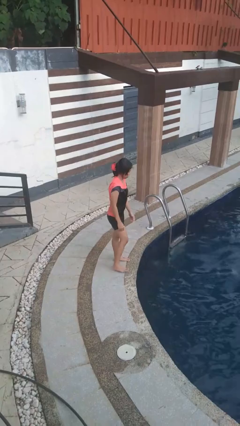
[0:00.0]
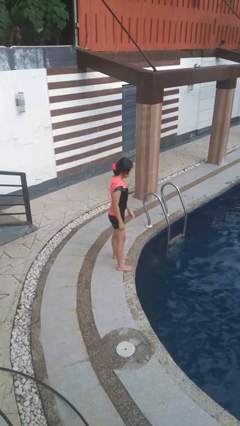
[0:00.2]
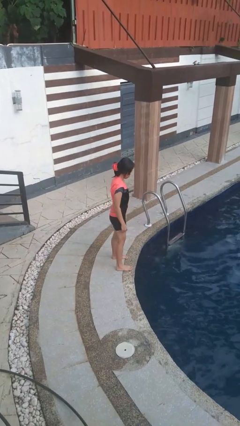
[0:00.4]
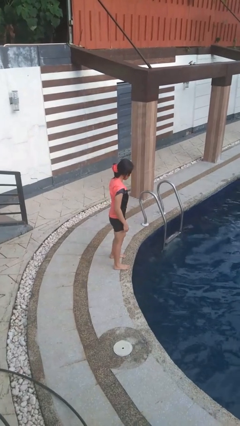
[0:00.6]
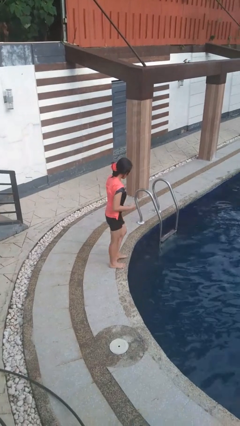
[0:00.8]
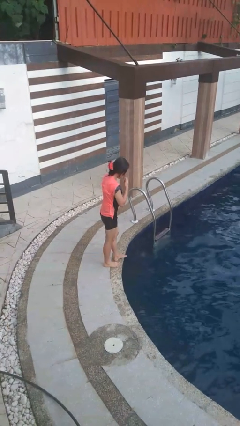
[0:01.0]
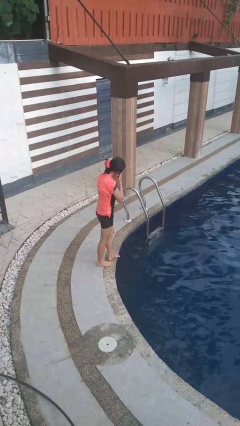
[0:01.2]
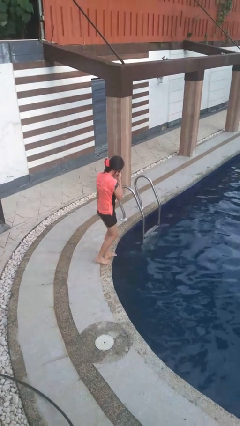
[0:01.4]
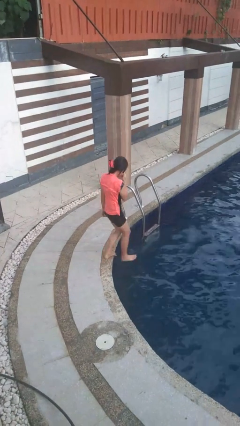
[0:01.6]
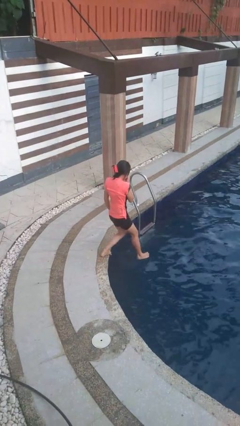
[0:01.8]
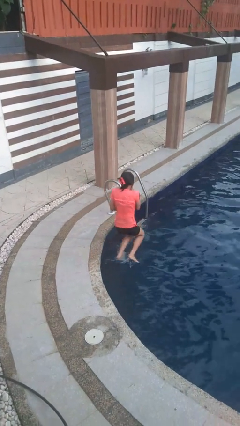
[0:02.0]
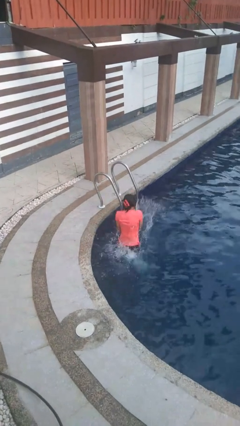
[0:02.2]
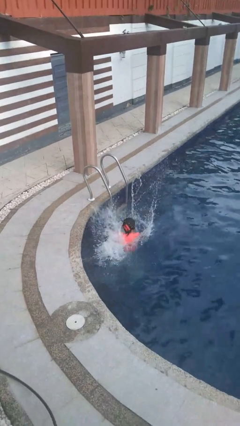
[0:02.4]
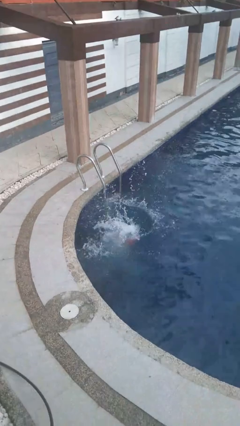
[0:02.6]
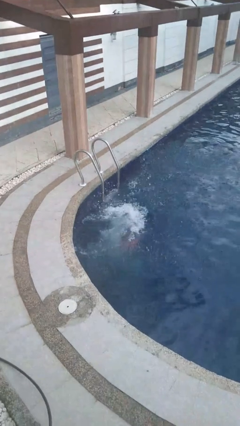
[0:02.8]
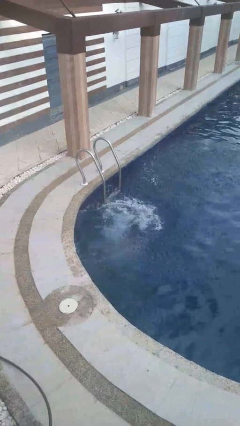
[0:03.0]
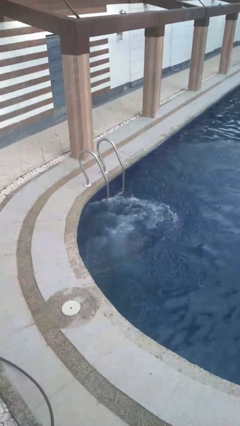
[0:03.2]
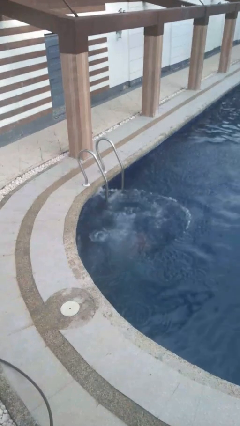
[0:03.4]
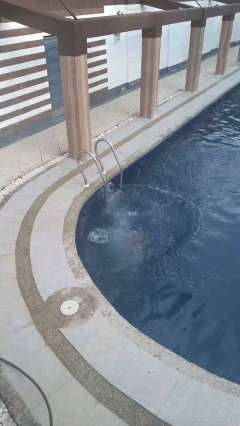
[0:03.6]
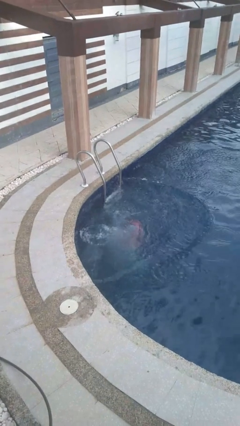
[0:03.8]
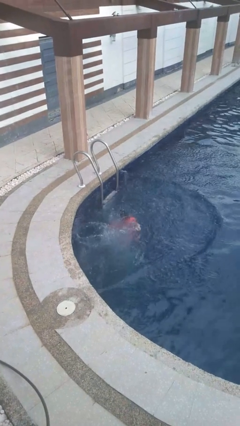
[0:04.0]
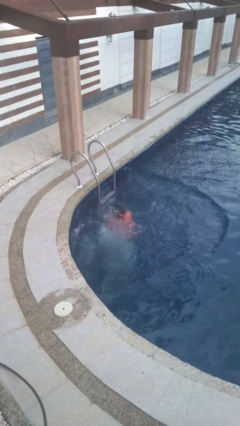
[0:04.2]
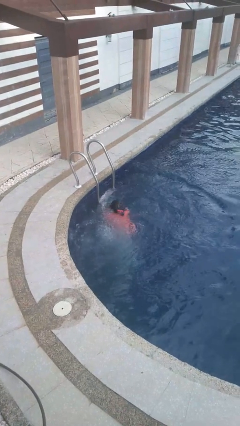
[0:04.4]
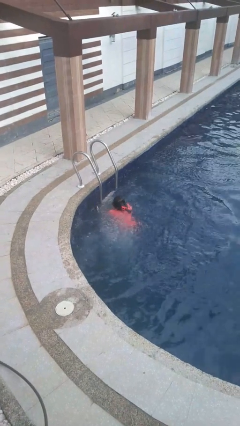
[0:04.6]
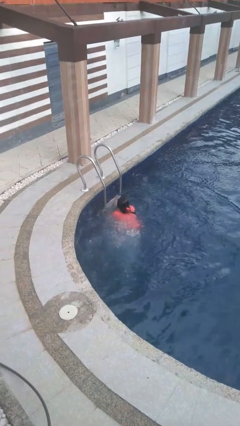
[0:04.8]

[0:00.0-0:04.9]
person jumps into pool

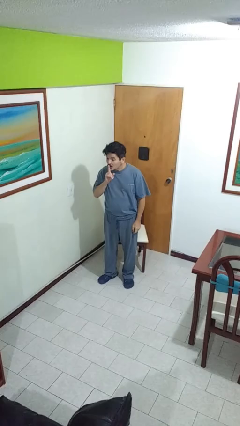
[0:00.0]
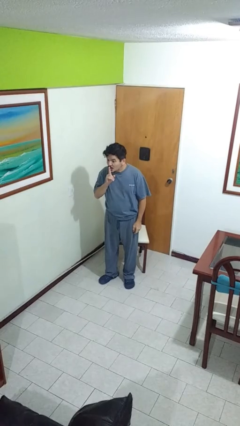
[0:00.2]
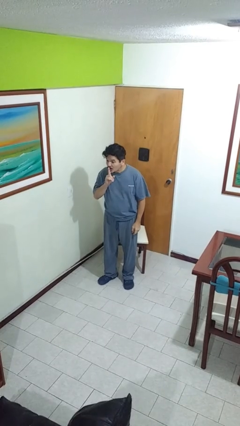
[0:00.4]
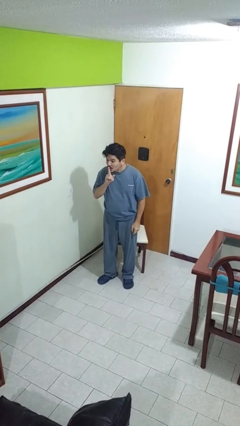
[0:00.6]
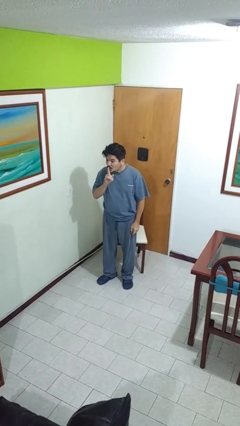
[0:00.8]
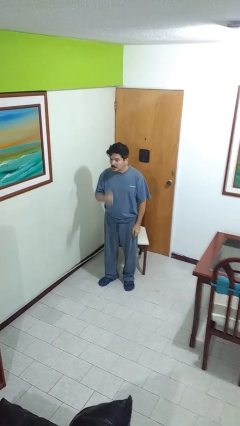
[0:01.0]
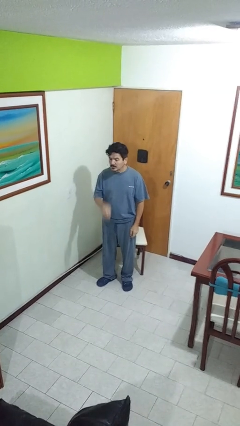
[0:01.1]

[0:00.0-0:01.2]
person gestures be quiet

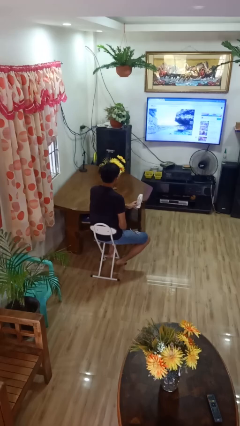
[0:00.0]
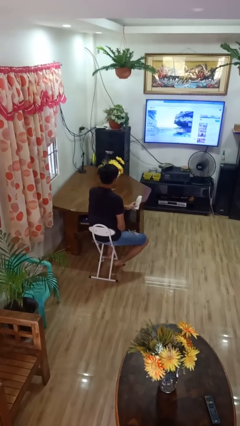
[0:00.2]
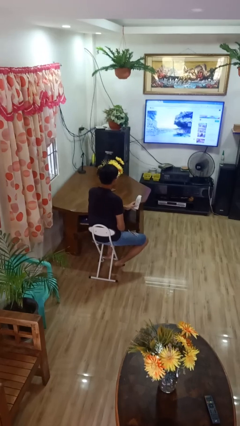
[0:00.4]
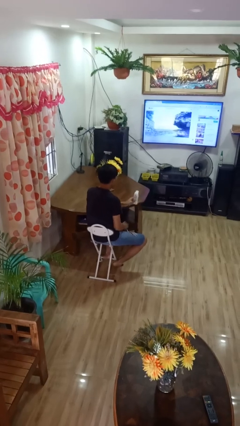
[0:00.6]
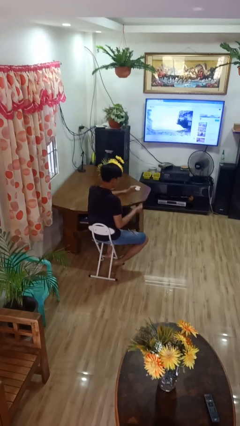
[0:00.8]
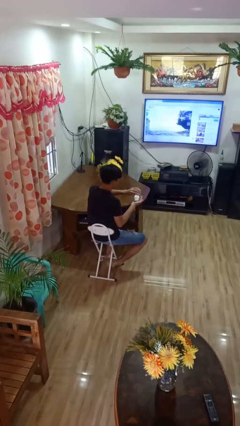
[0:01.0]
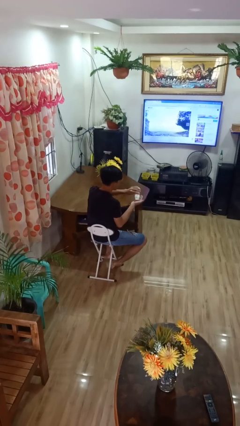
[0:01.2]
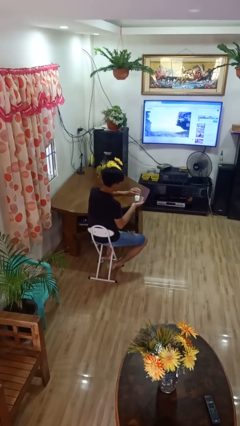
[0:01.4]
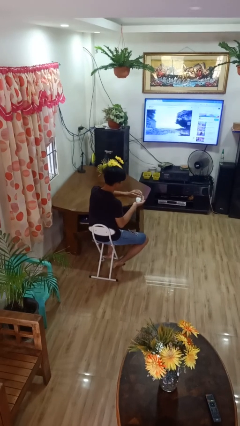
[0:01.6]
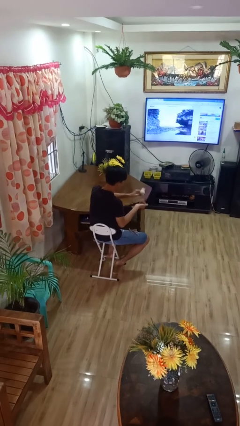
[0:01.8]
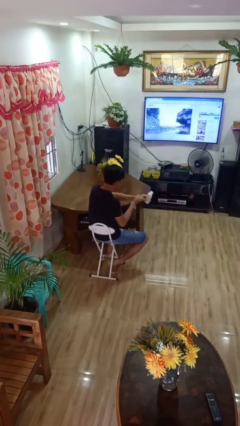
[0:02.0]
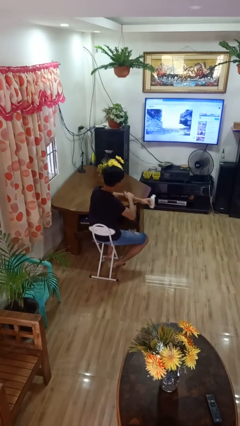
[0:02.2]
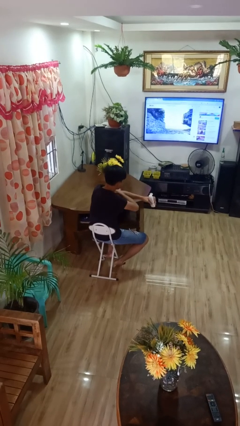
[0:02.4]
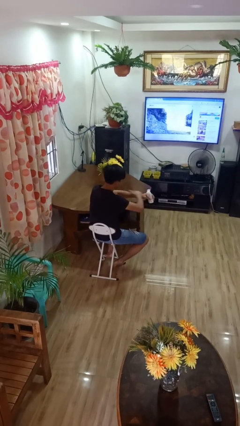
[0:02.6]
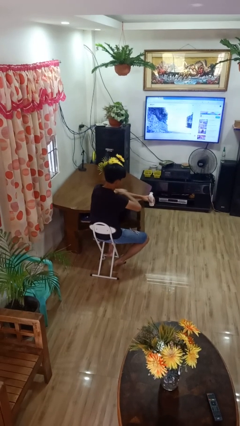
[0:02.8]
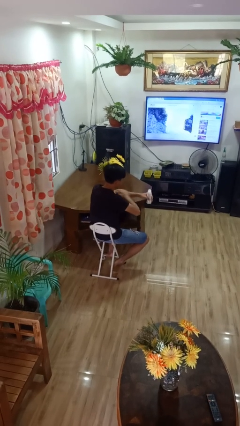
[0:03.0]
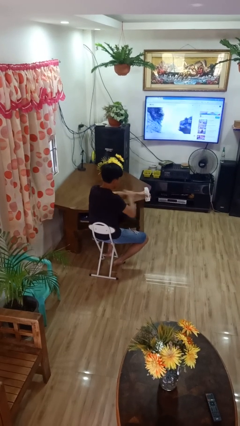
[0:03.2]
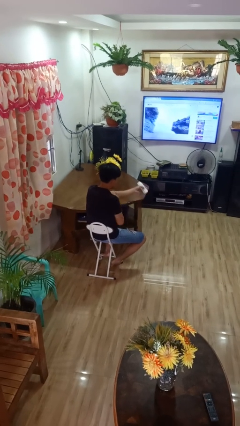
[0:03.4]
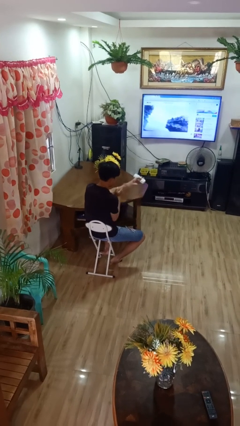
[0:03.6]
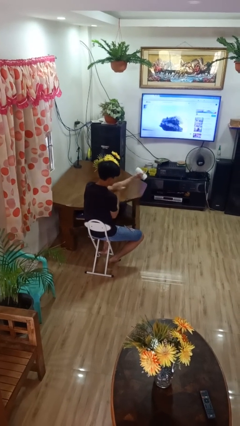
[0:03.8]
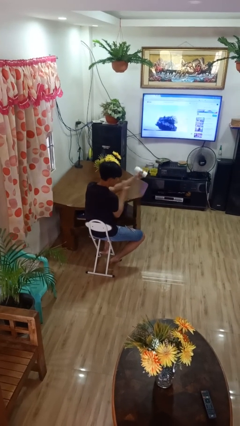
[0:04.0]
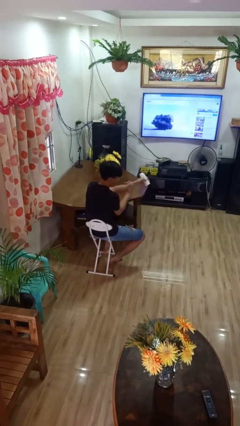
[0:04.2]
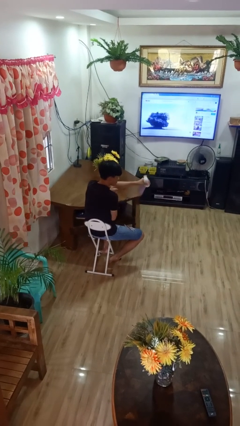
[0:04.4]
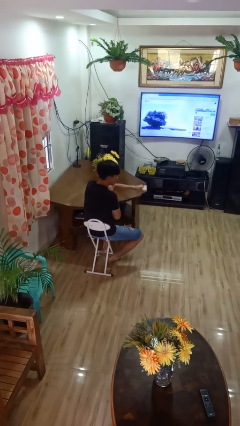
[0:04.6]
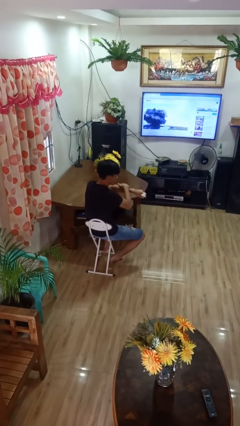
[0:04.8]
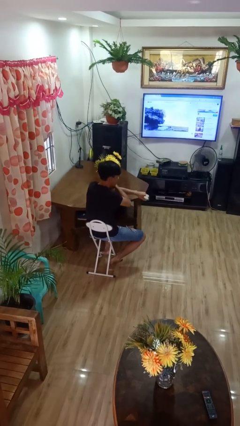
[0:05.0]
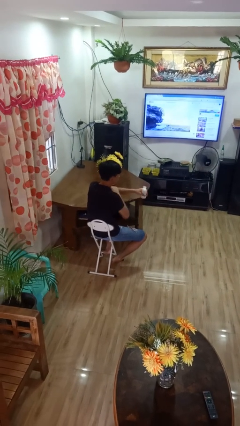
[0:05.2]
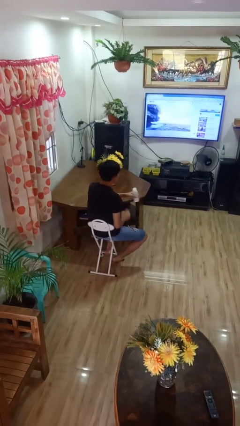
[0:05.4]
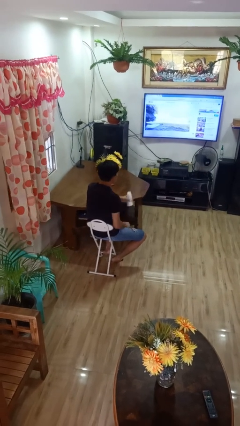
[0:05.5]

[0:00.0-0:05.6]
person applies sunscreen

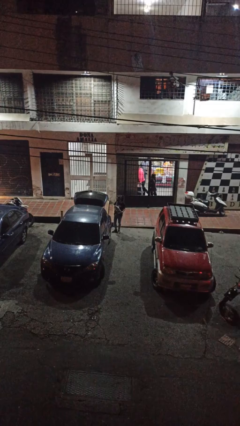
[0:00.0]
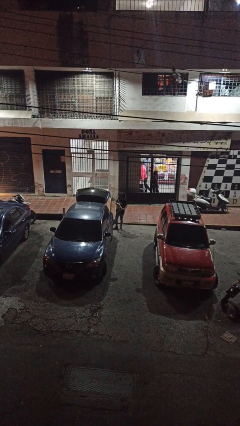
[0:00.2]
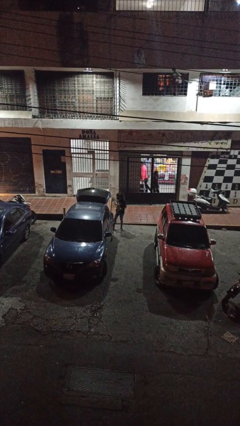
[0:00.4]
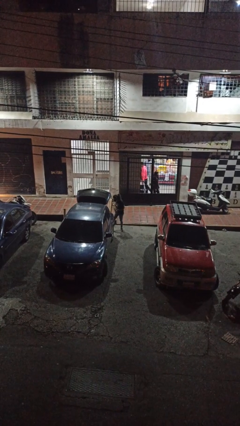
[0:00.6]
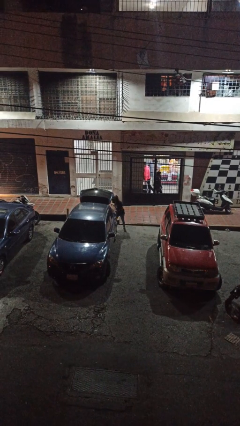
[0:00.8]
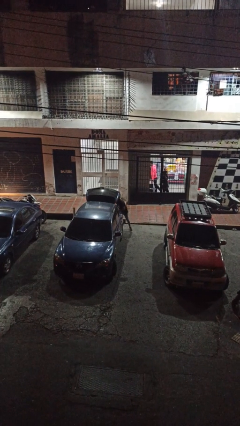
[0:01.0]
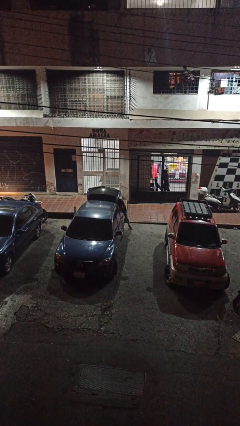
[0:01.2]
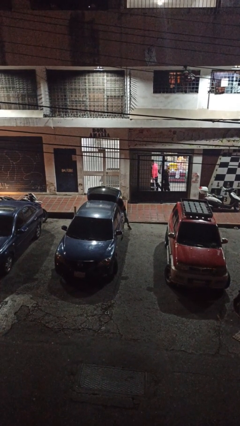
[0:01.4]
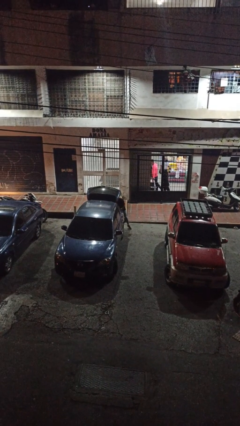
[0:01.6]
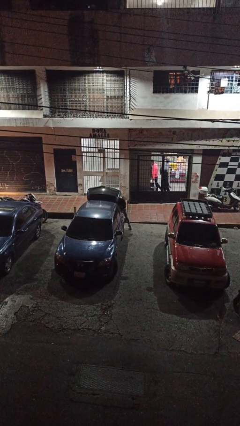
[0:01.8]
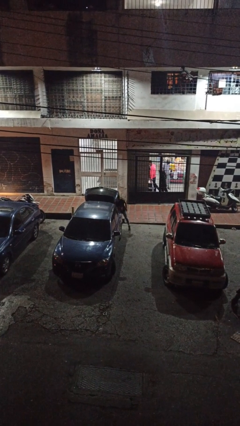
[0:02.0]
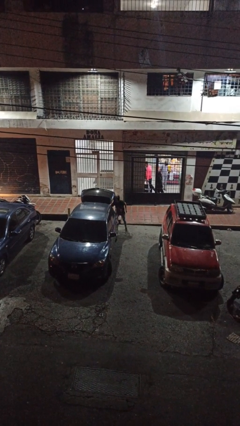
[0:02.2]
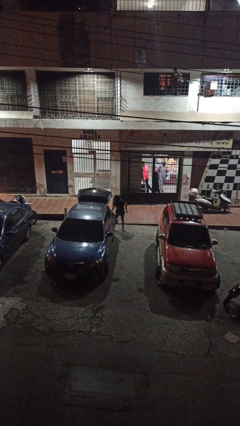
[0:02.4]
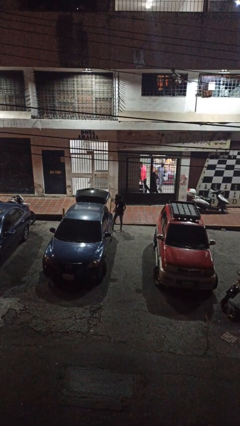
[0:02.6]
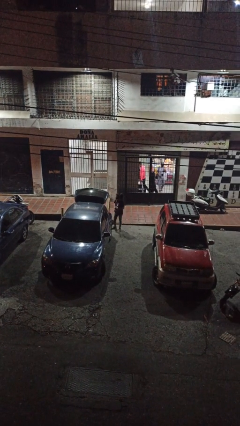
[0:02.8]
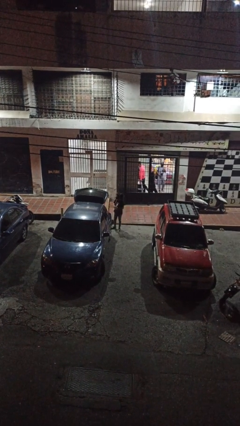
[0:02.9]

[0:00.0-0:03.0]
person loads car

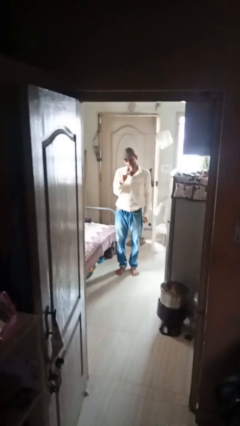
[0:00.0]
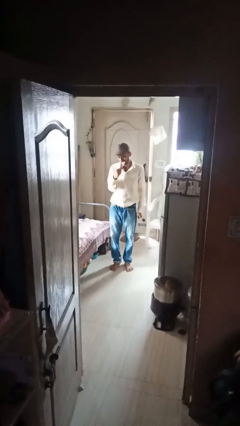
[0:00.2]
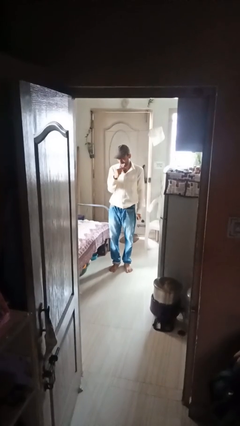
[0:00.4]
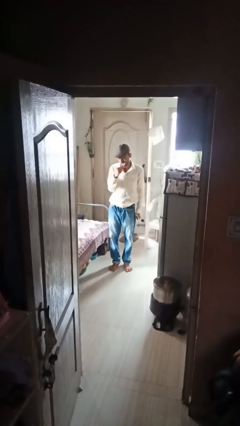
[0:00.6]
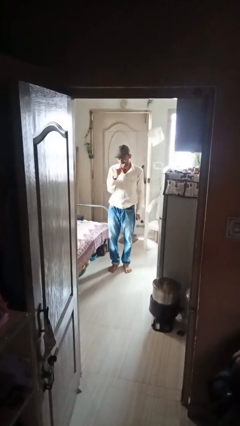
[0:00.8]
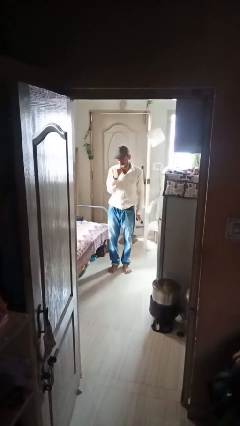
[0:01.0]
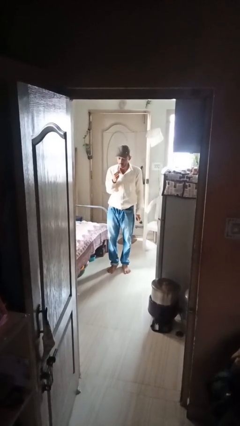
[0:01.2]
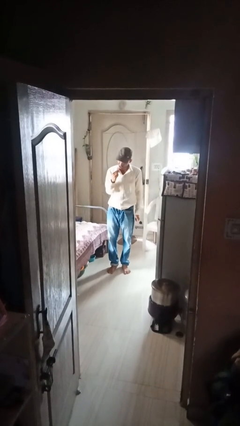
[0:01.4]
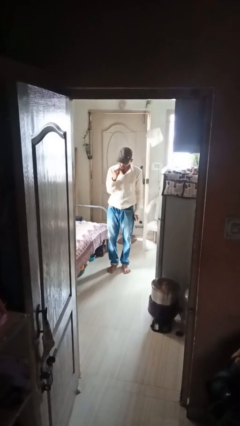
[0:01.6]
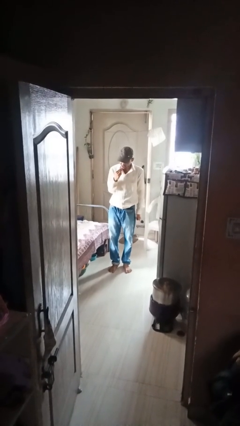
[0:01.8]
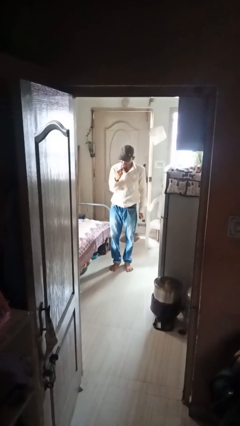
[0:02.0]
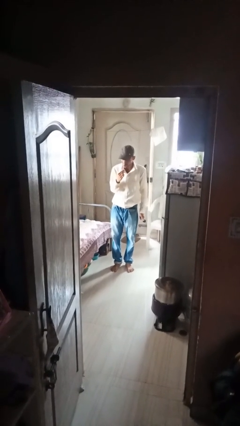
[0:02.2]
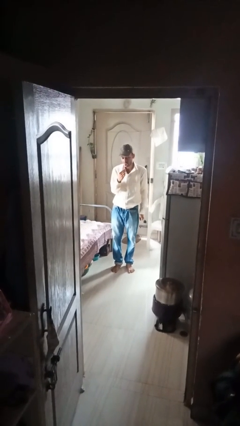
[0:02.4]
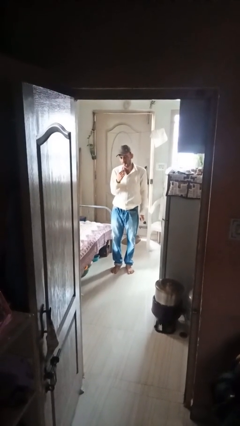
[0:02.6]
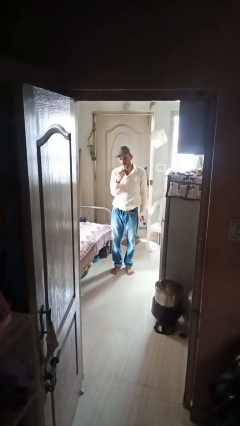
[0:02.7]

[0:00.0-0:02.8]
person brushes teeth
